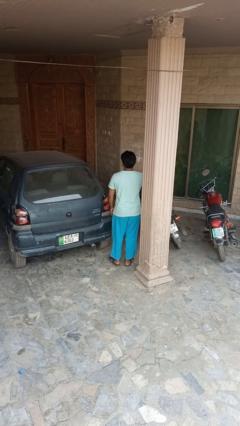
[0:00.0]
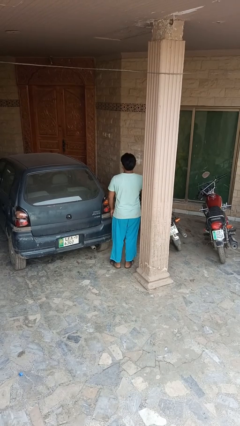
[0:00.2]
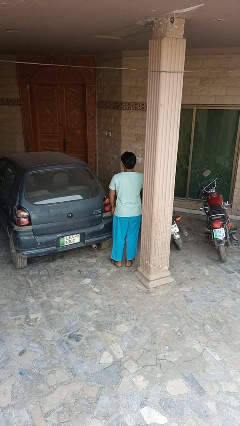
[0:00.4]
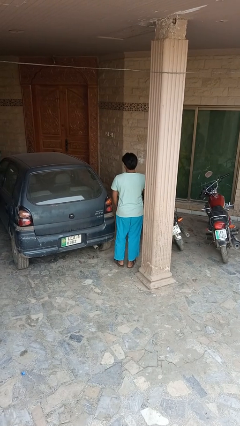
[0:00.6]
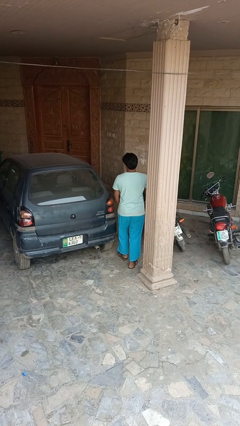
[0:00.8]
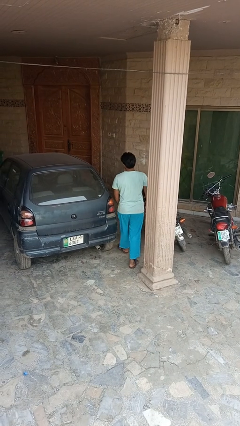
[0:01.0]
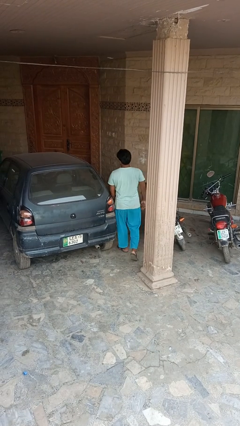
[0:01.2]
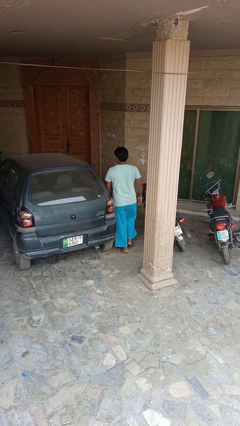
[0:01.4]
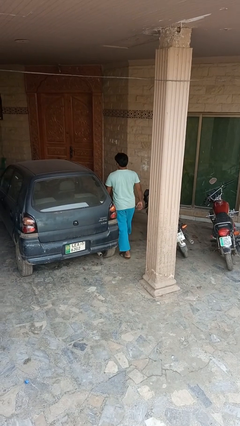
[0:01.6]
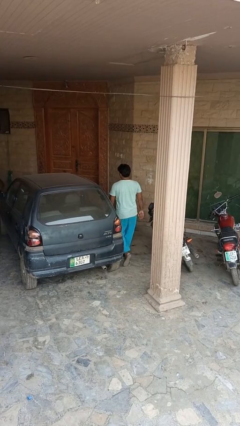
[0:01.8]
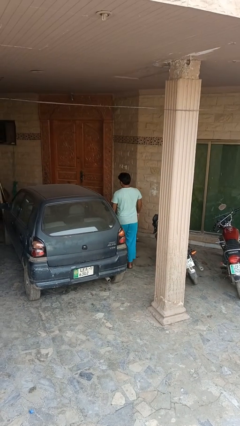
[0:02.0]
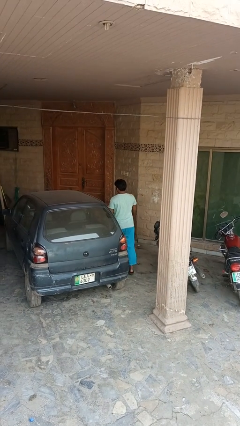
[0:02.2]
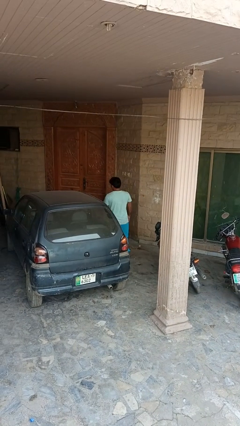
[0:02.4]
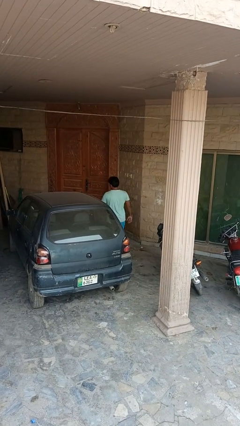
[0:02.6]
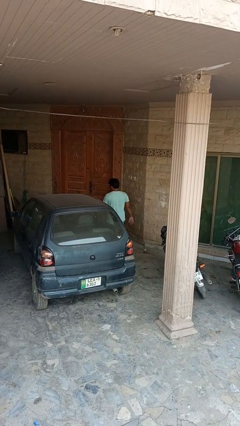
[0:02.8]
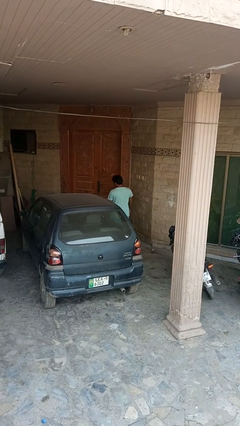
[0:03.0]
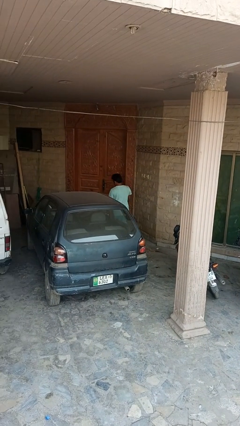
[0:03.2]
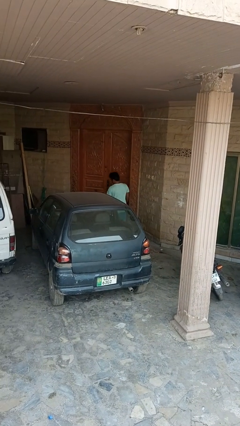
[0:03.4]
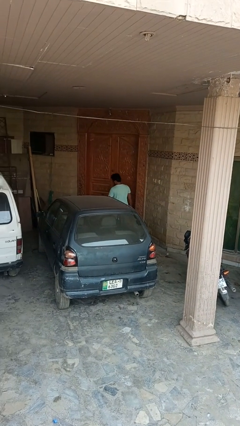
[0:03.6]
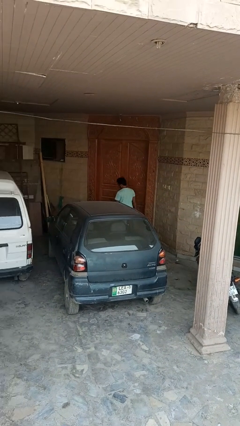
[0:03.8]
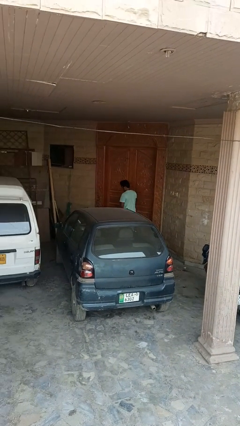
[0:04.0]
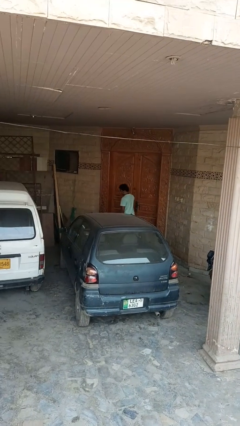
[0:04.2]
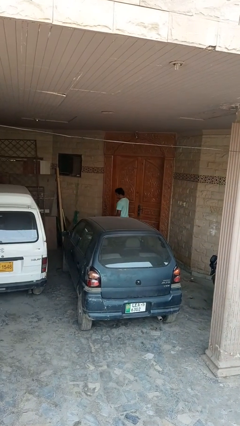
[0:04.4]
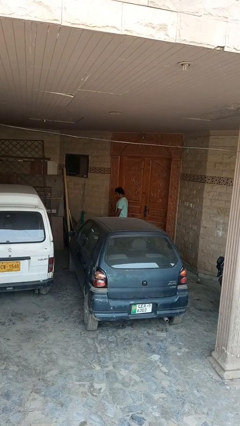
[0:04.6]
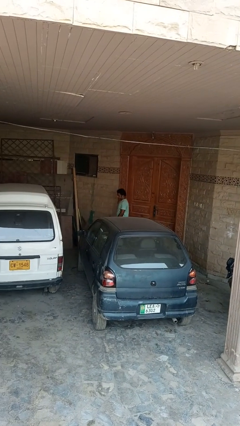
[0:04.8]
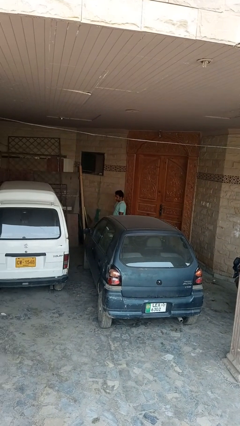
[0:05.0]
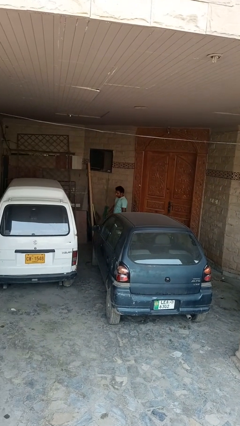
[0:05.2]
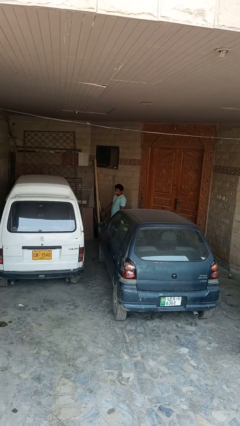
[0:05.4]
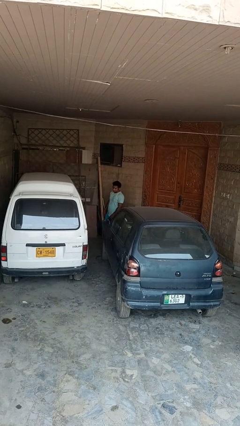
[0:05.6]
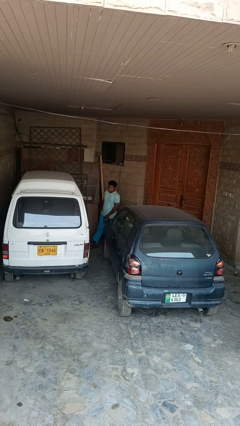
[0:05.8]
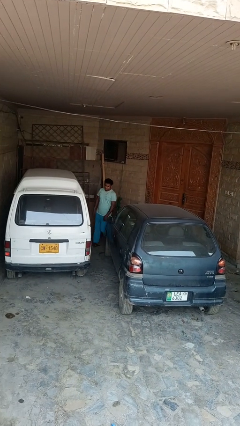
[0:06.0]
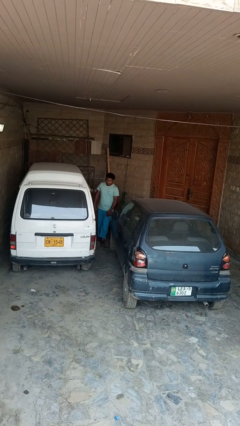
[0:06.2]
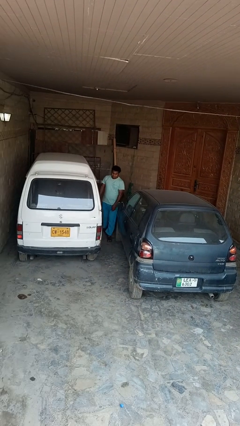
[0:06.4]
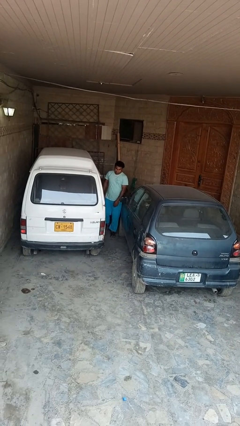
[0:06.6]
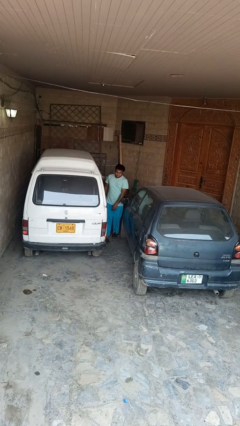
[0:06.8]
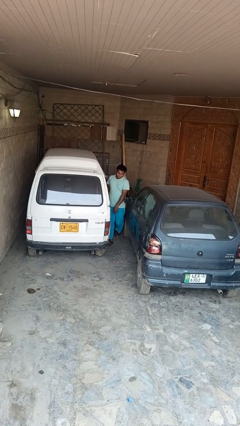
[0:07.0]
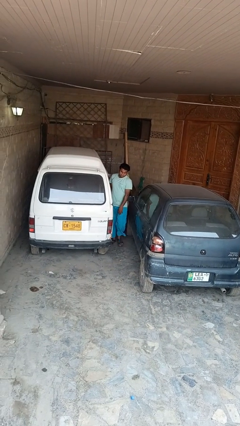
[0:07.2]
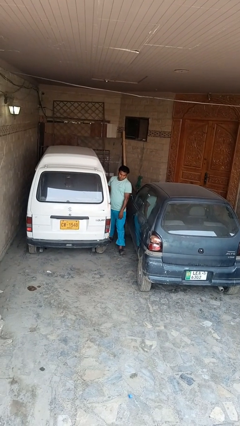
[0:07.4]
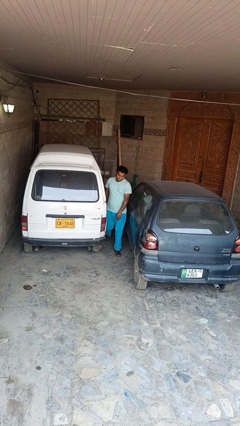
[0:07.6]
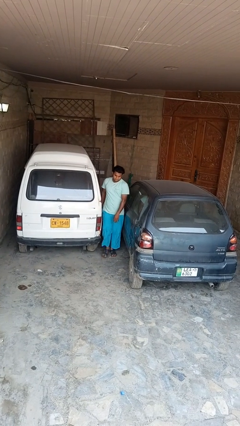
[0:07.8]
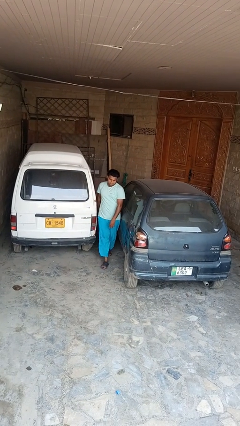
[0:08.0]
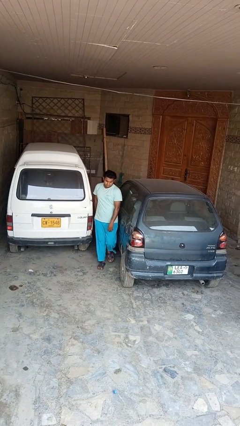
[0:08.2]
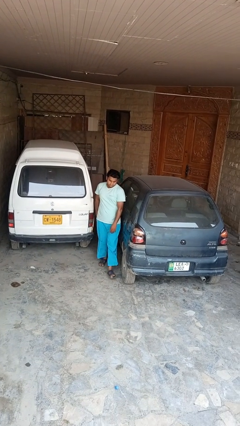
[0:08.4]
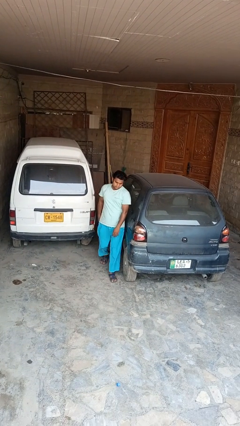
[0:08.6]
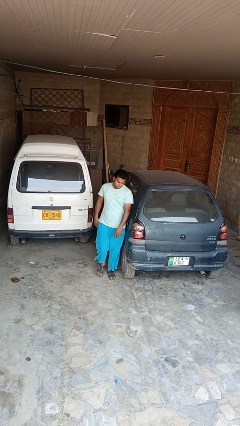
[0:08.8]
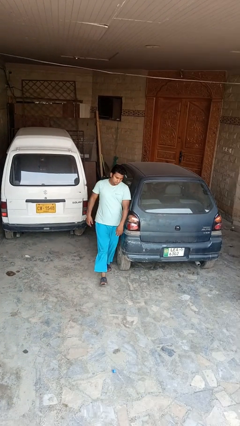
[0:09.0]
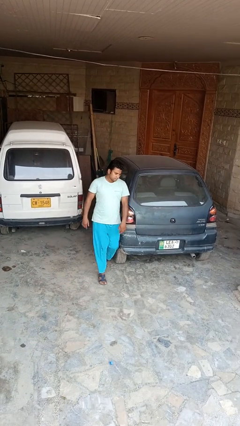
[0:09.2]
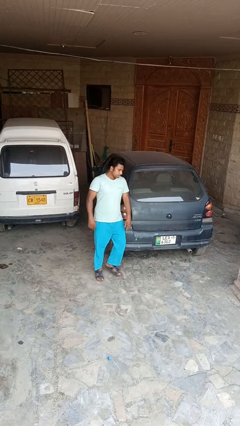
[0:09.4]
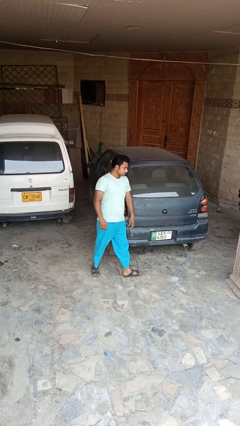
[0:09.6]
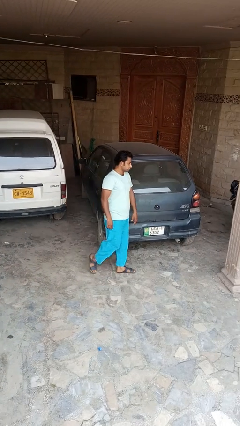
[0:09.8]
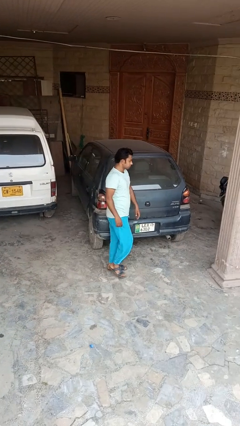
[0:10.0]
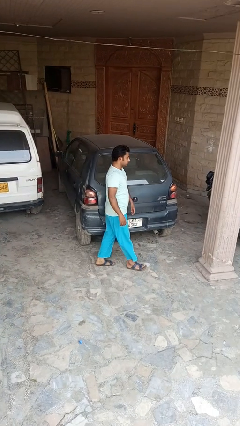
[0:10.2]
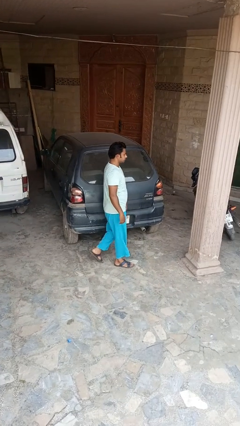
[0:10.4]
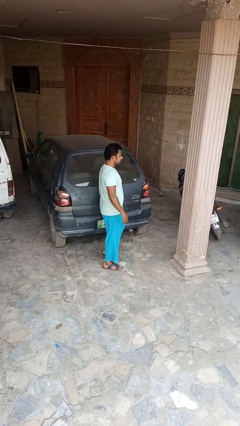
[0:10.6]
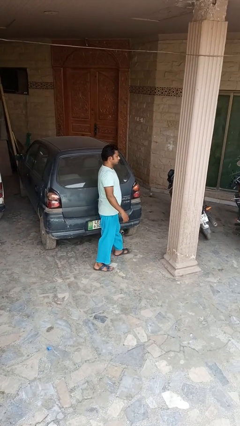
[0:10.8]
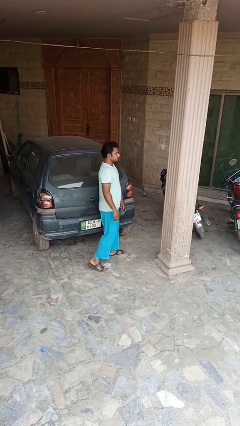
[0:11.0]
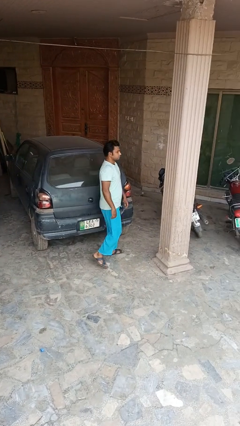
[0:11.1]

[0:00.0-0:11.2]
person walks around car

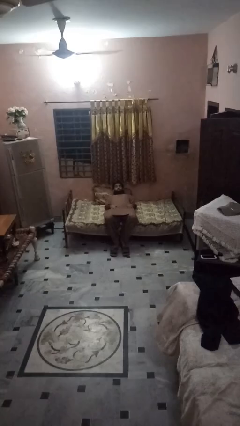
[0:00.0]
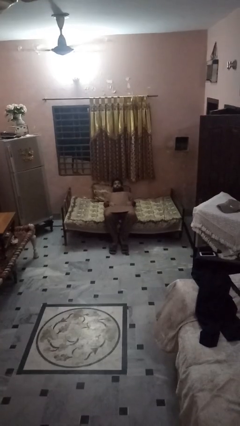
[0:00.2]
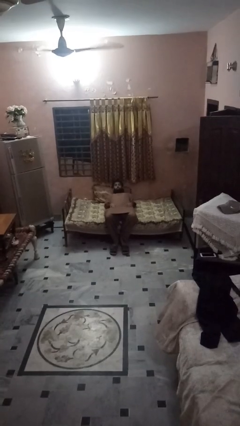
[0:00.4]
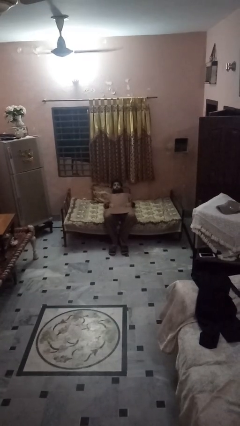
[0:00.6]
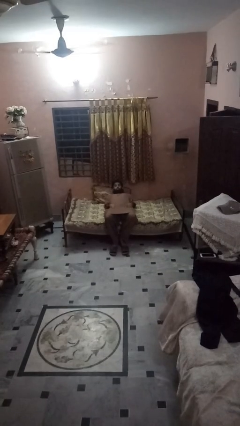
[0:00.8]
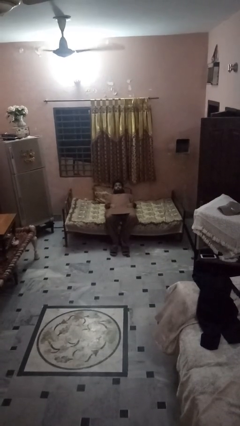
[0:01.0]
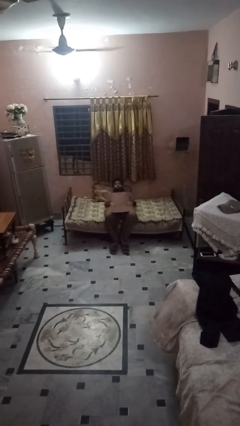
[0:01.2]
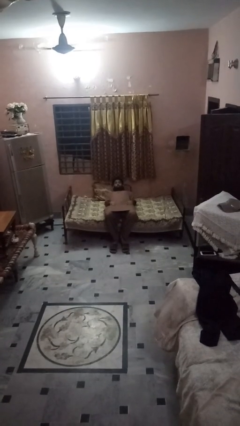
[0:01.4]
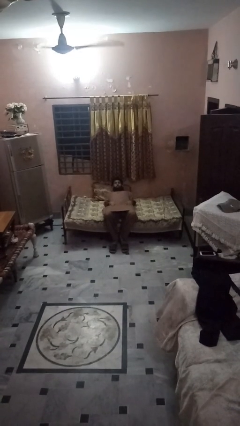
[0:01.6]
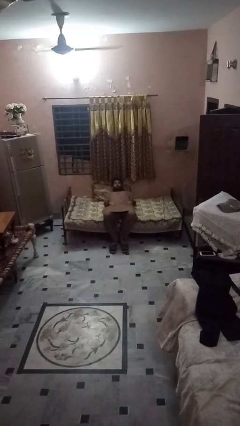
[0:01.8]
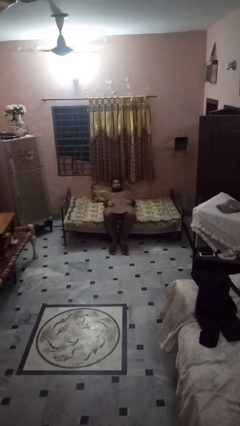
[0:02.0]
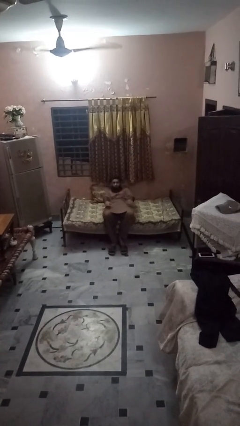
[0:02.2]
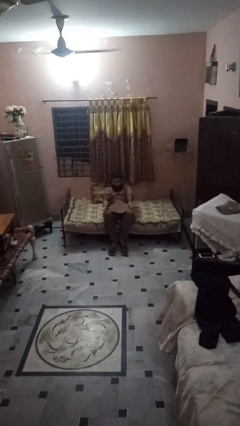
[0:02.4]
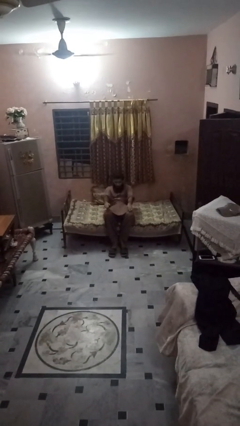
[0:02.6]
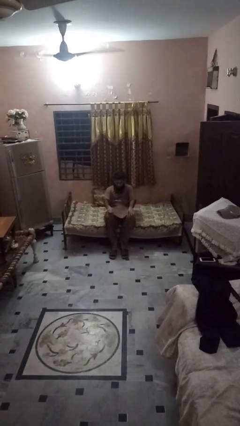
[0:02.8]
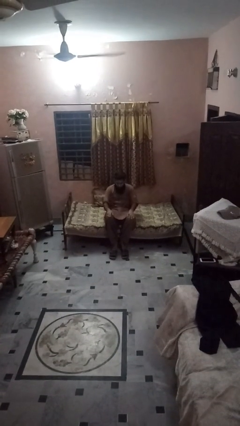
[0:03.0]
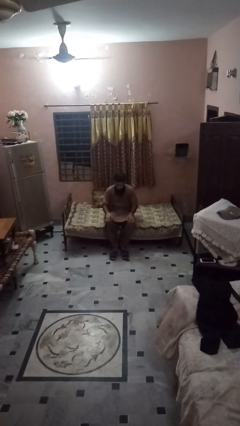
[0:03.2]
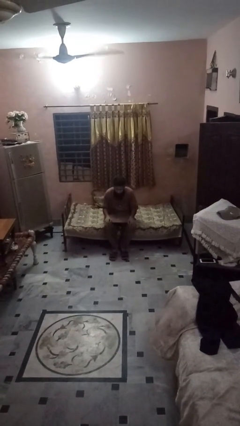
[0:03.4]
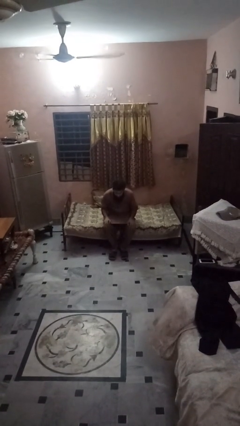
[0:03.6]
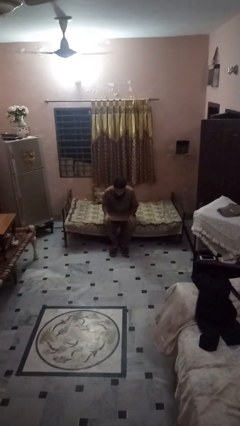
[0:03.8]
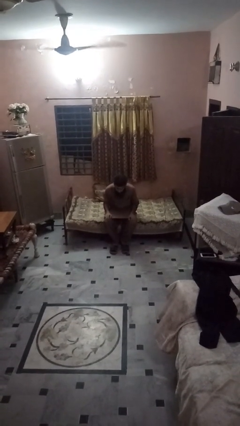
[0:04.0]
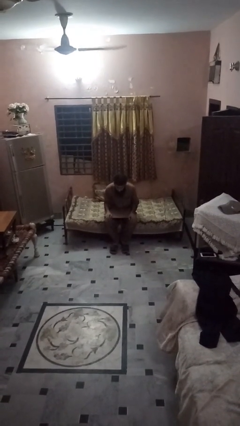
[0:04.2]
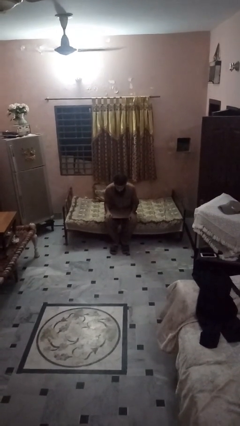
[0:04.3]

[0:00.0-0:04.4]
person stands up

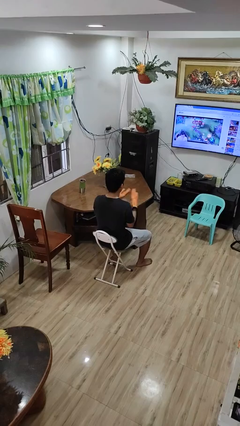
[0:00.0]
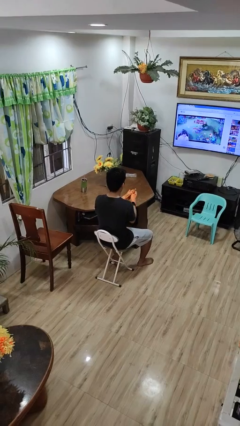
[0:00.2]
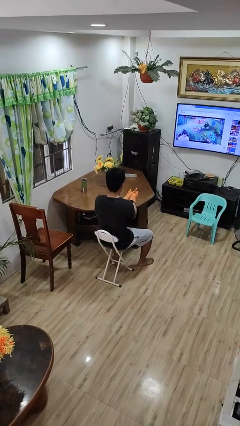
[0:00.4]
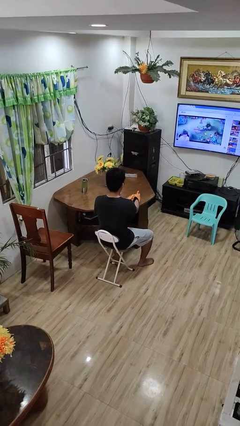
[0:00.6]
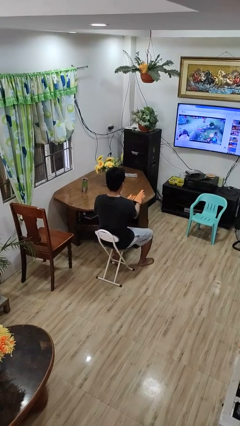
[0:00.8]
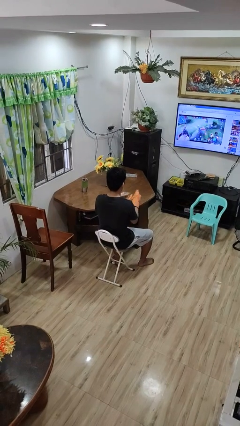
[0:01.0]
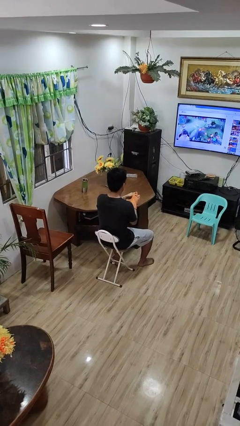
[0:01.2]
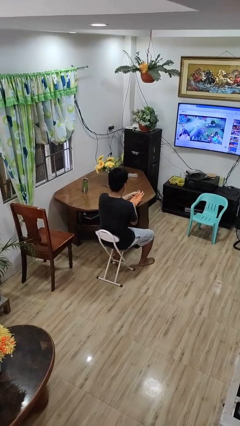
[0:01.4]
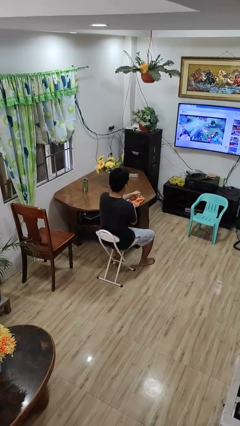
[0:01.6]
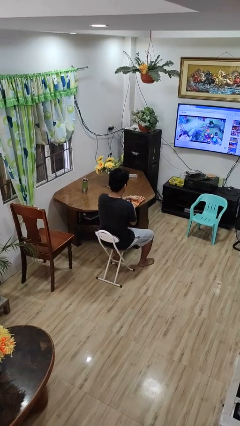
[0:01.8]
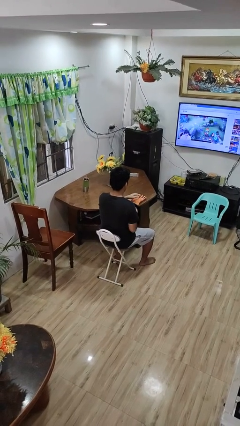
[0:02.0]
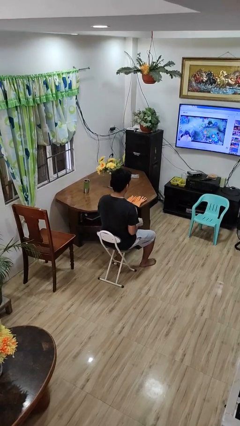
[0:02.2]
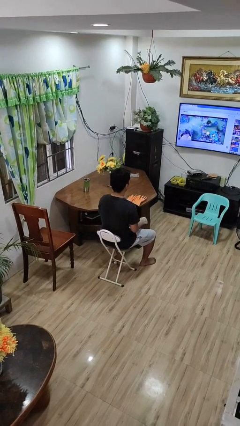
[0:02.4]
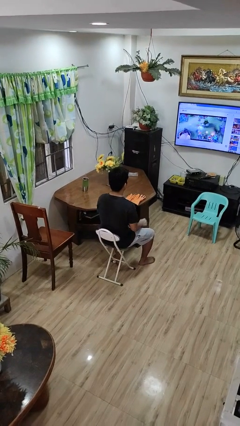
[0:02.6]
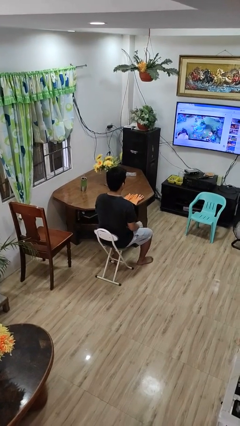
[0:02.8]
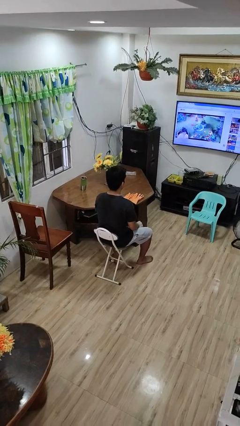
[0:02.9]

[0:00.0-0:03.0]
person takes off gloves
